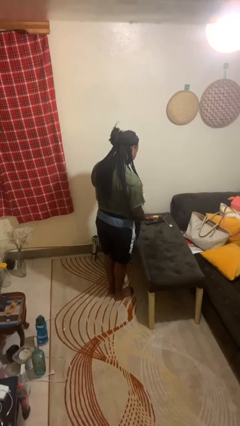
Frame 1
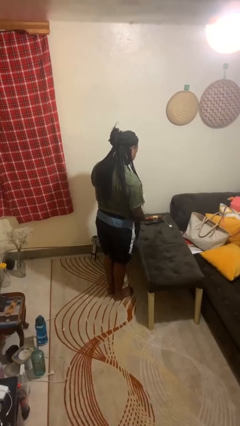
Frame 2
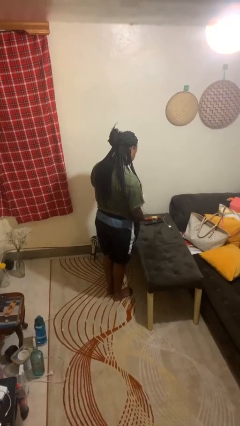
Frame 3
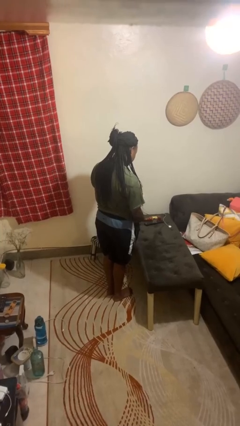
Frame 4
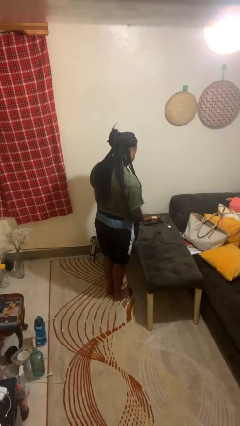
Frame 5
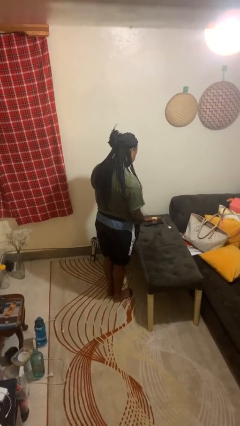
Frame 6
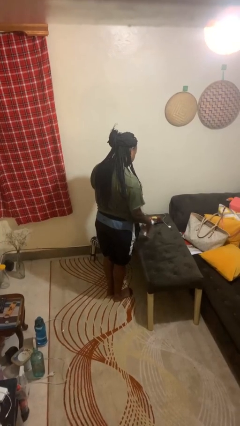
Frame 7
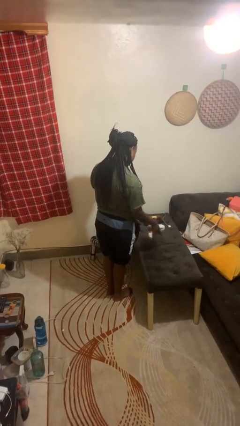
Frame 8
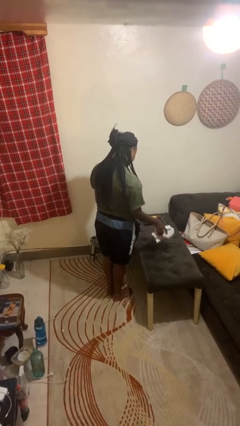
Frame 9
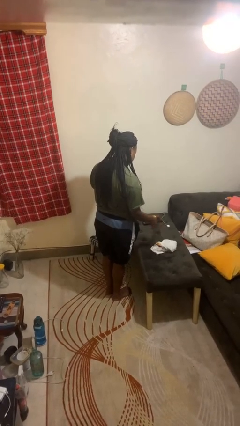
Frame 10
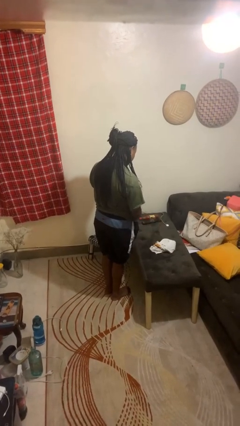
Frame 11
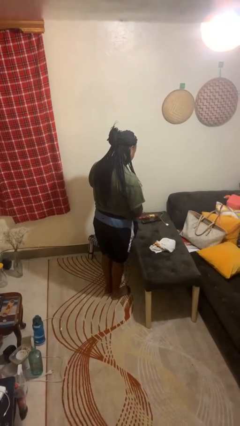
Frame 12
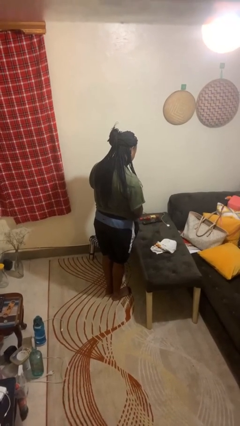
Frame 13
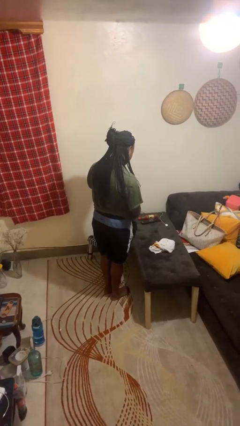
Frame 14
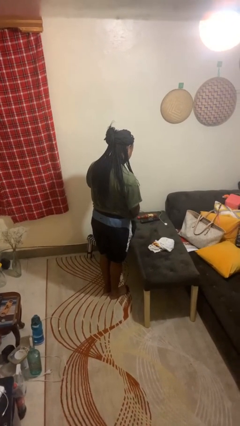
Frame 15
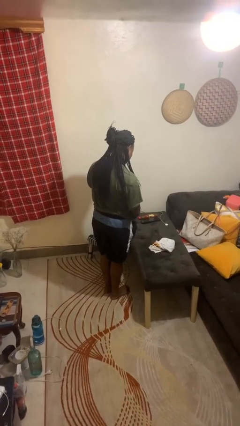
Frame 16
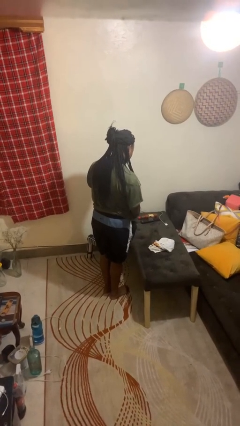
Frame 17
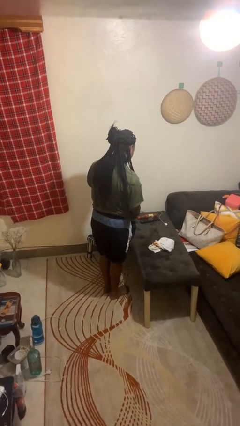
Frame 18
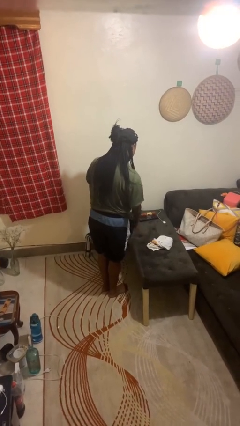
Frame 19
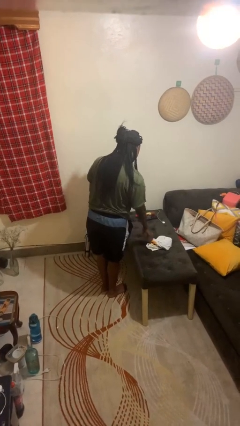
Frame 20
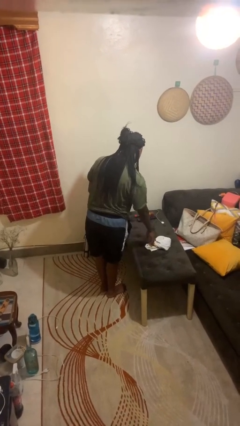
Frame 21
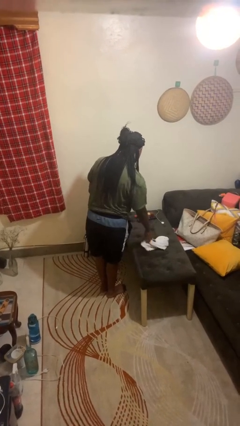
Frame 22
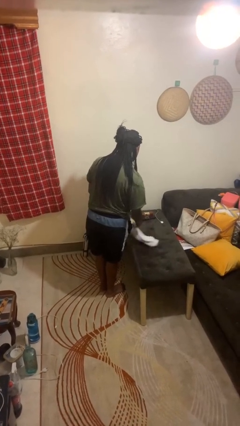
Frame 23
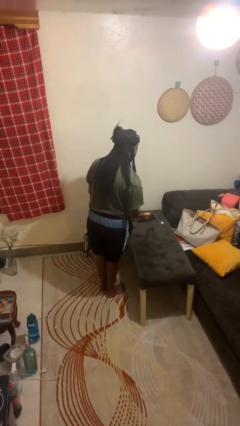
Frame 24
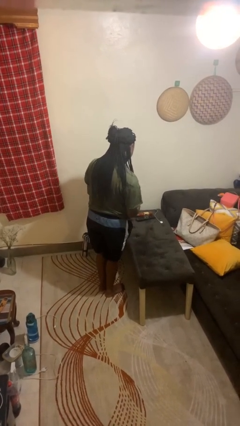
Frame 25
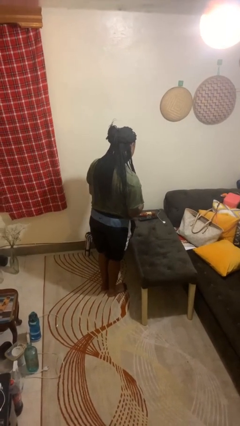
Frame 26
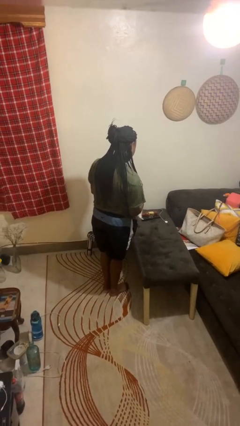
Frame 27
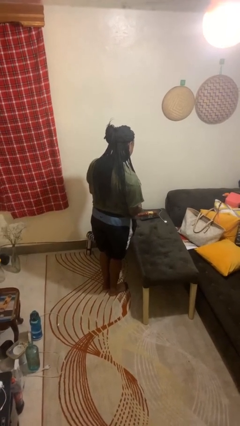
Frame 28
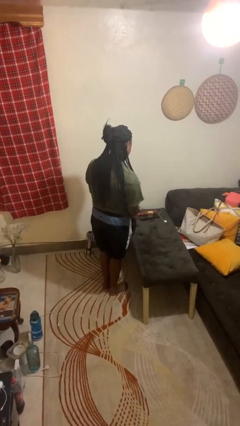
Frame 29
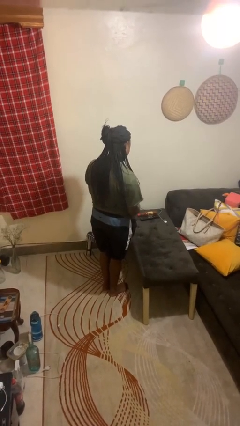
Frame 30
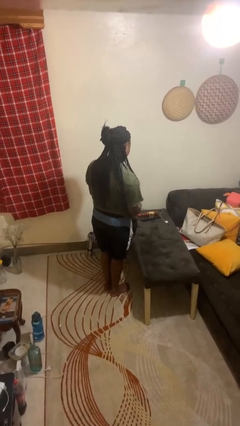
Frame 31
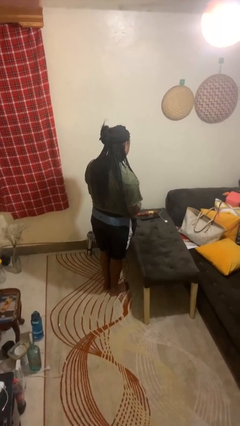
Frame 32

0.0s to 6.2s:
person throws object on table

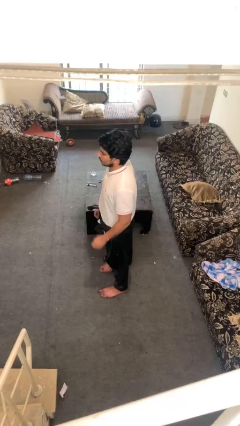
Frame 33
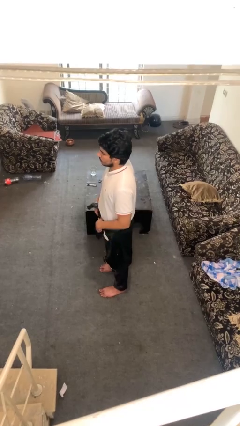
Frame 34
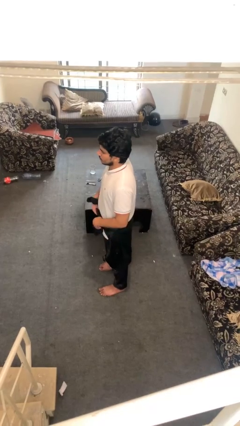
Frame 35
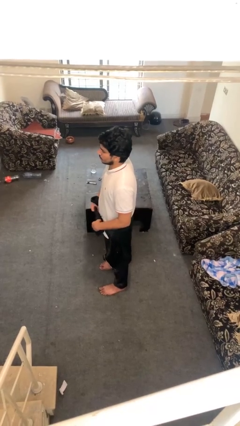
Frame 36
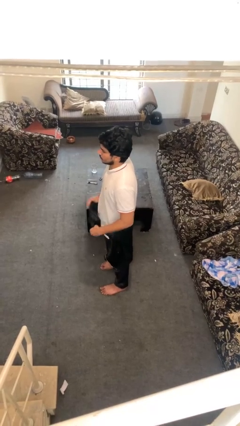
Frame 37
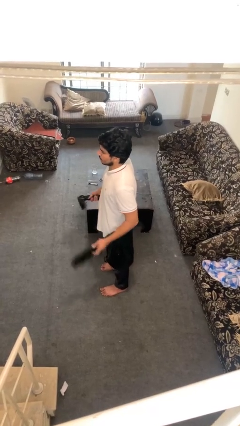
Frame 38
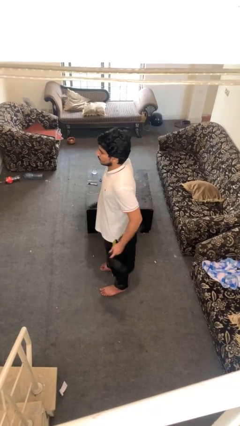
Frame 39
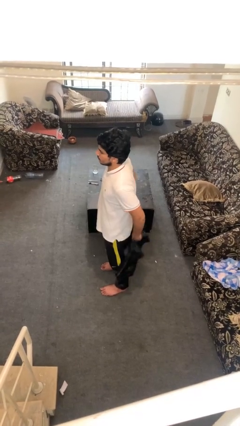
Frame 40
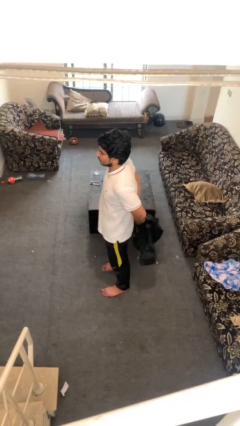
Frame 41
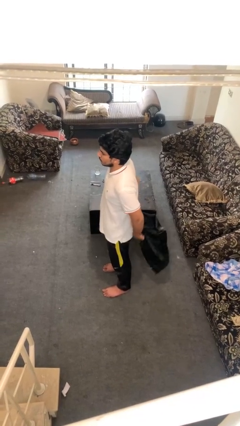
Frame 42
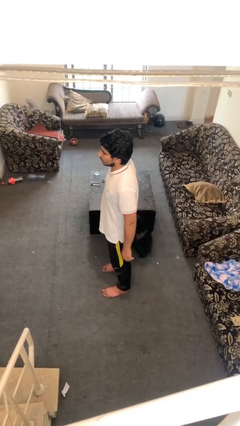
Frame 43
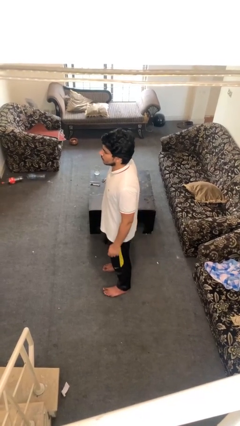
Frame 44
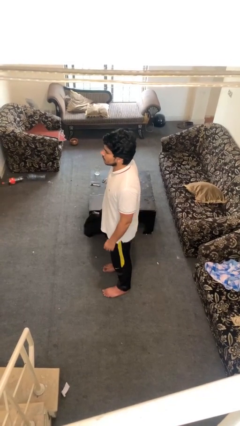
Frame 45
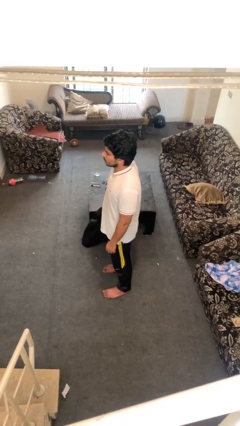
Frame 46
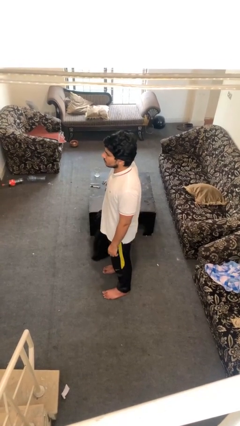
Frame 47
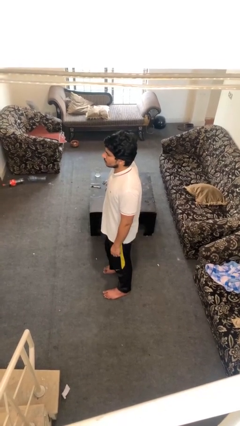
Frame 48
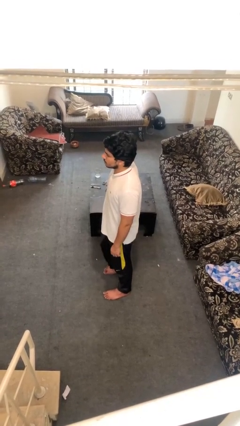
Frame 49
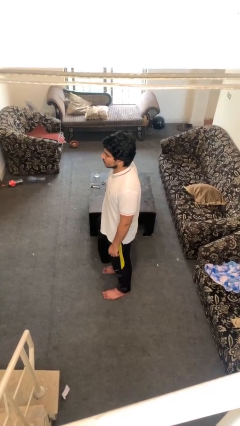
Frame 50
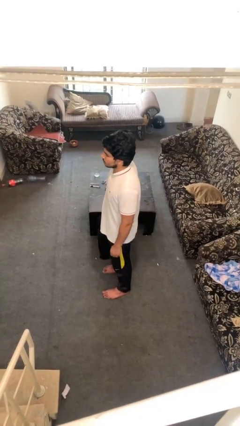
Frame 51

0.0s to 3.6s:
person unties jacket around waist

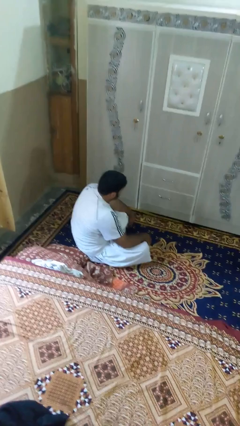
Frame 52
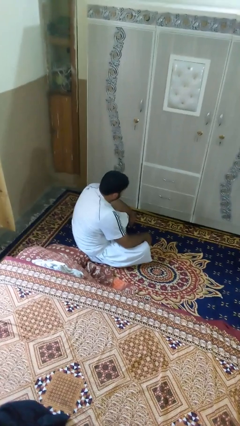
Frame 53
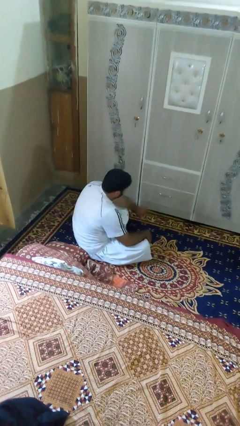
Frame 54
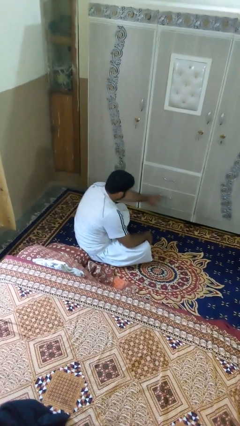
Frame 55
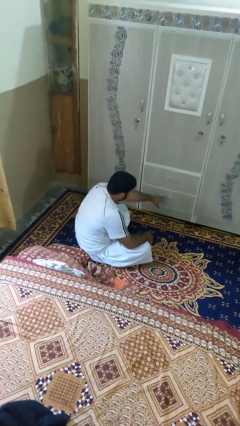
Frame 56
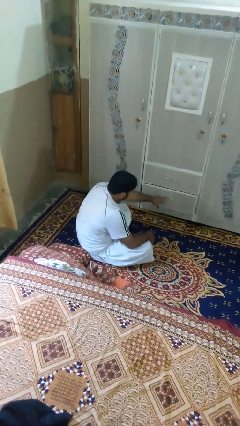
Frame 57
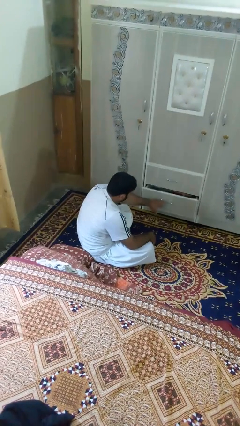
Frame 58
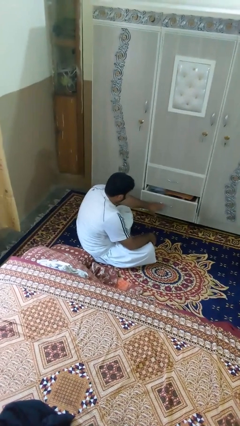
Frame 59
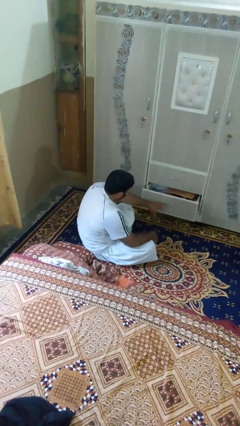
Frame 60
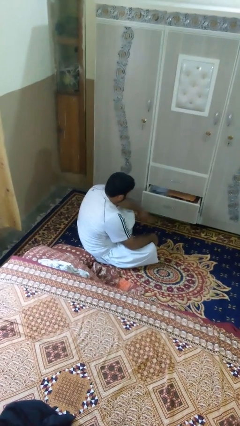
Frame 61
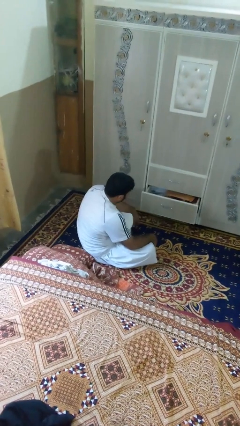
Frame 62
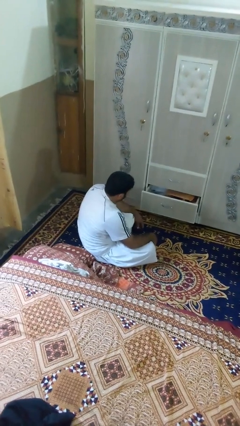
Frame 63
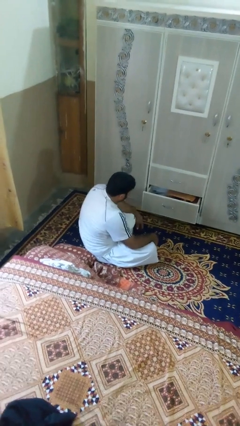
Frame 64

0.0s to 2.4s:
person opens dresser drawer

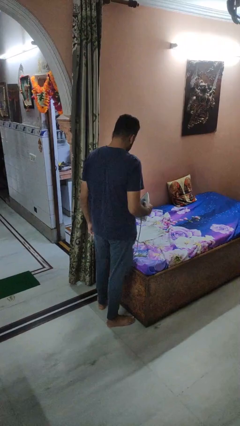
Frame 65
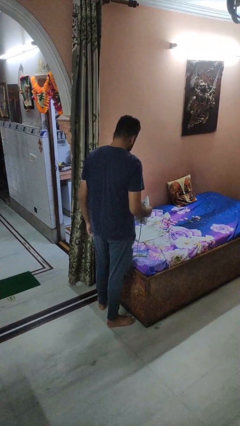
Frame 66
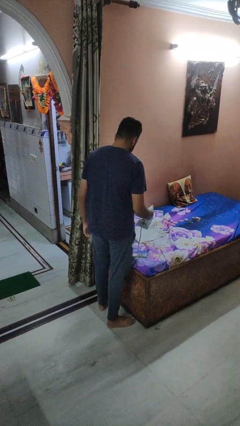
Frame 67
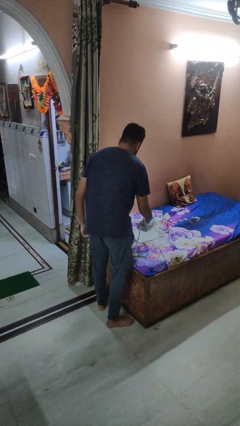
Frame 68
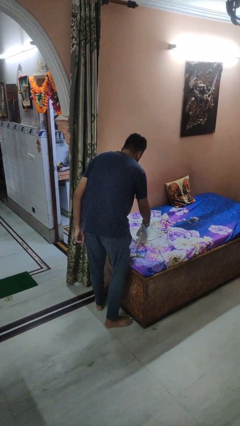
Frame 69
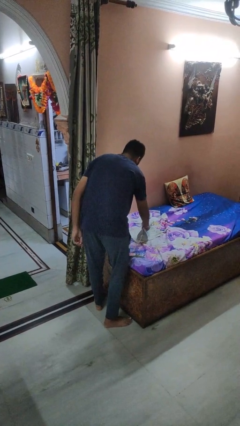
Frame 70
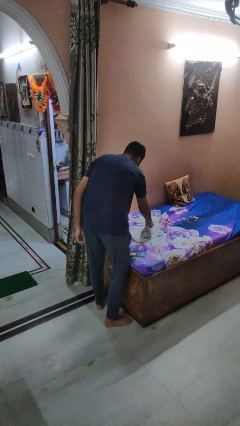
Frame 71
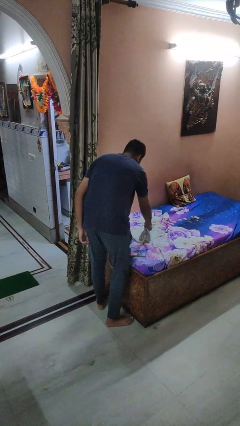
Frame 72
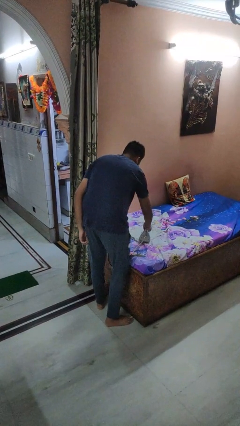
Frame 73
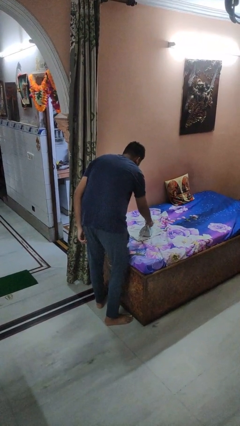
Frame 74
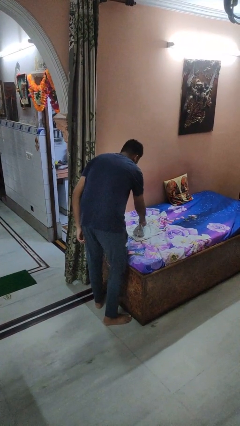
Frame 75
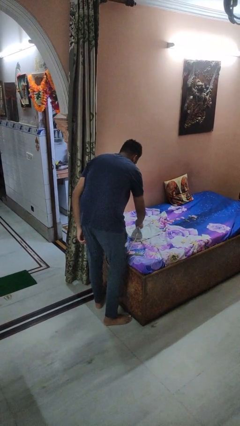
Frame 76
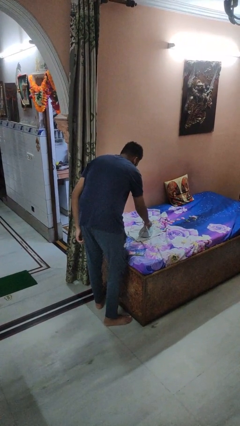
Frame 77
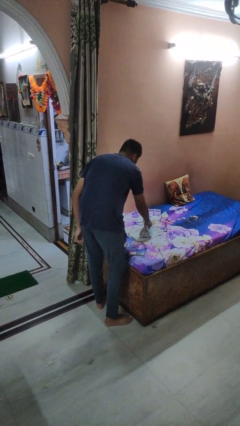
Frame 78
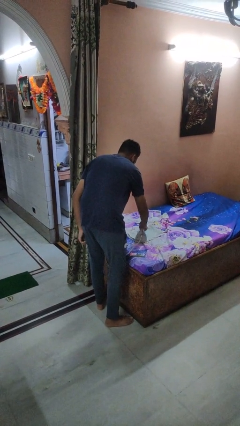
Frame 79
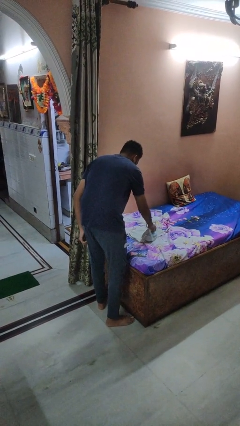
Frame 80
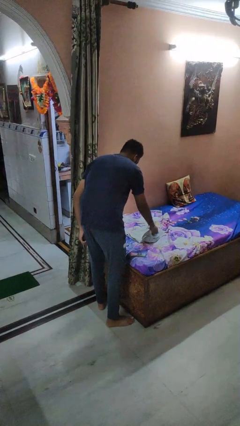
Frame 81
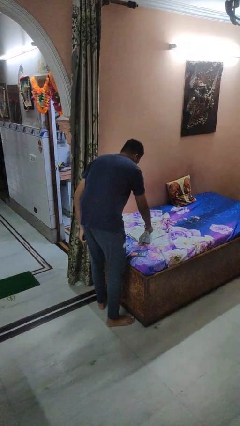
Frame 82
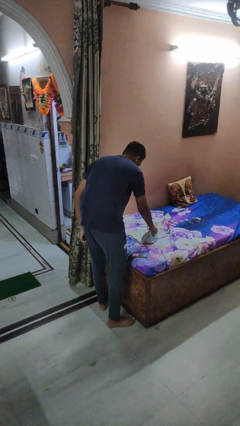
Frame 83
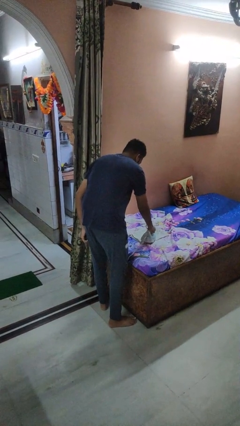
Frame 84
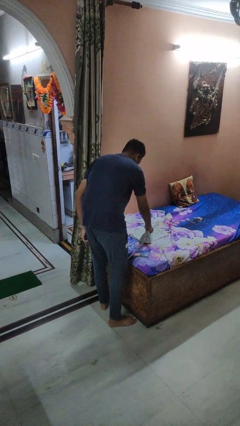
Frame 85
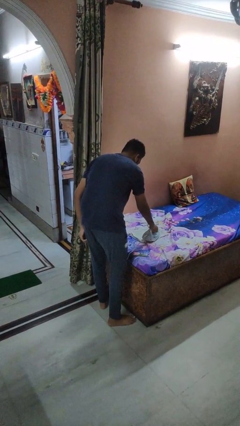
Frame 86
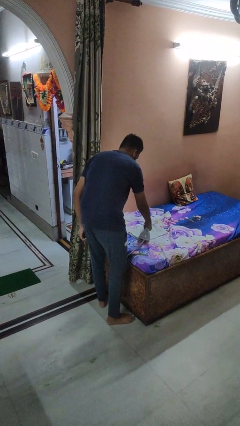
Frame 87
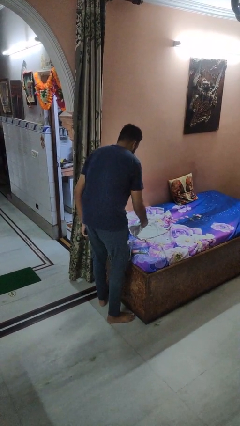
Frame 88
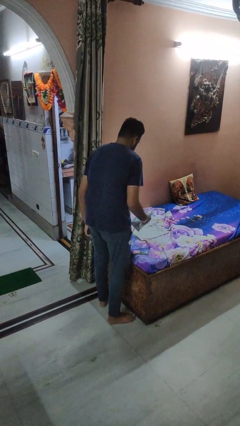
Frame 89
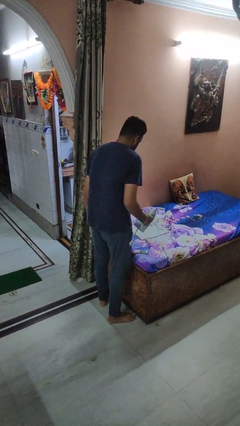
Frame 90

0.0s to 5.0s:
person irons clothes

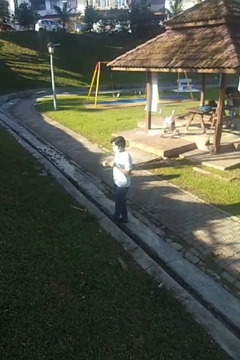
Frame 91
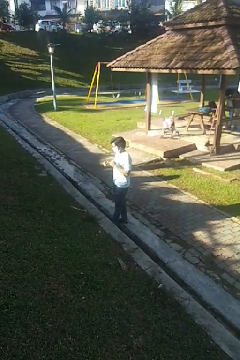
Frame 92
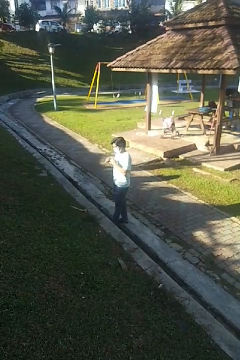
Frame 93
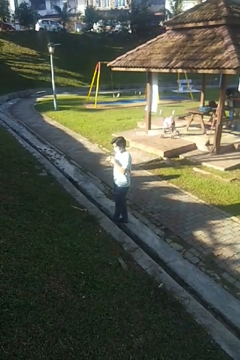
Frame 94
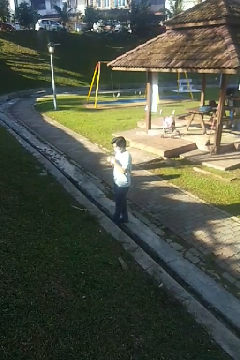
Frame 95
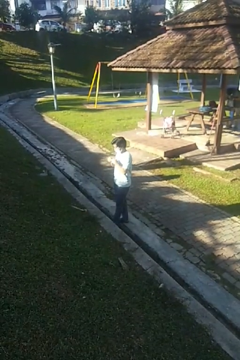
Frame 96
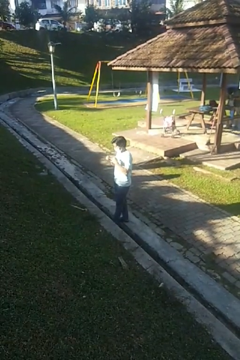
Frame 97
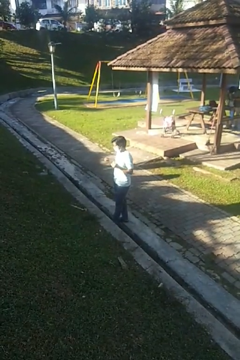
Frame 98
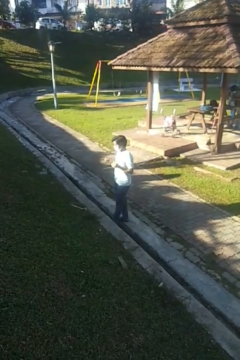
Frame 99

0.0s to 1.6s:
person takes off ring
